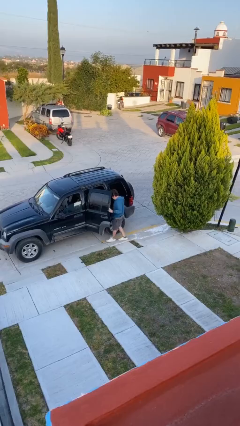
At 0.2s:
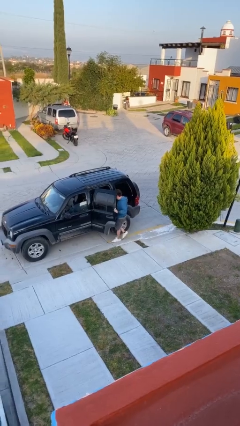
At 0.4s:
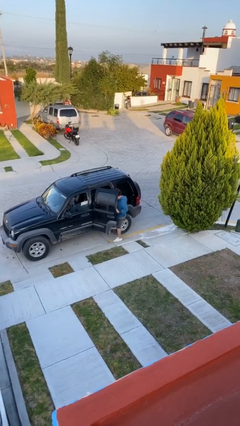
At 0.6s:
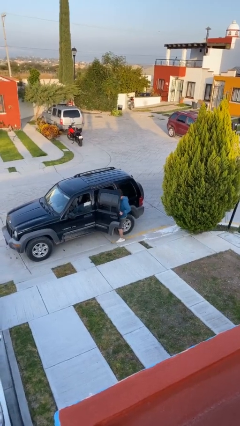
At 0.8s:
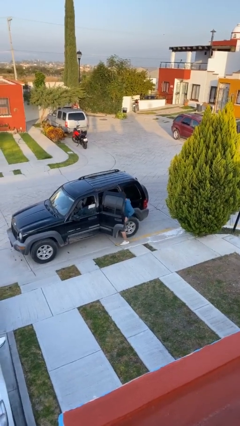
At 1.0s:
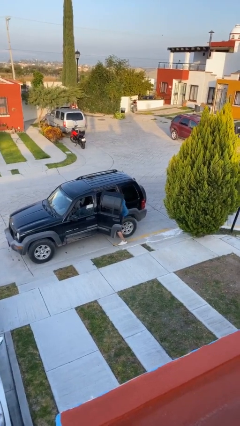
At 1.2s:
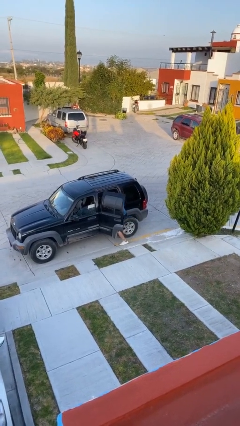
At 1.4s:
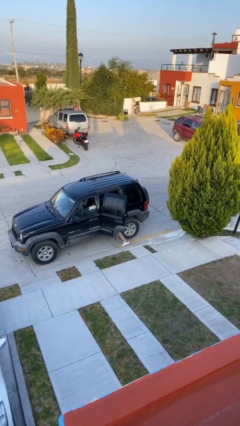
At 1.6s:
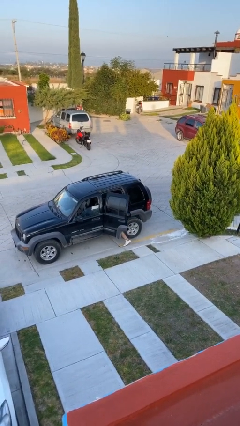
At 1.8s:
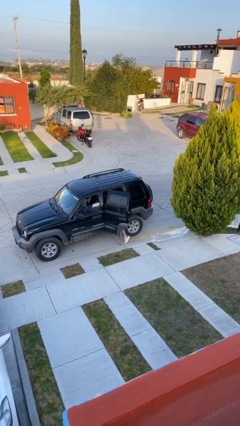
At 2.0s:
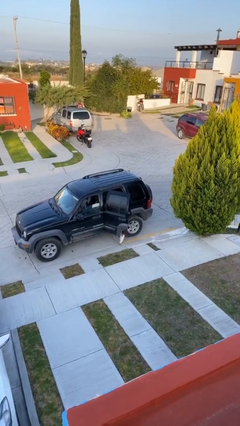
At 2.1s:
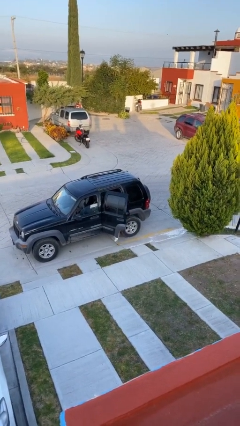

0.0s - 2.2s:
person enters car

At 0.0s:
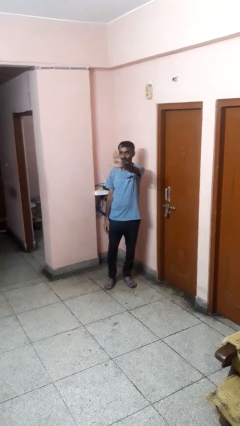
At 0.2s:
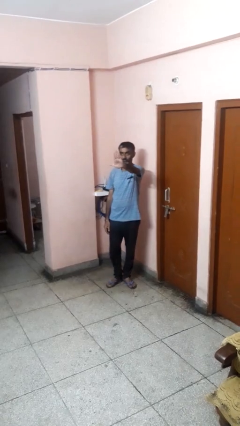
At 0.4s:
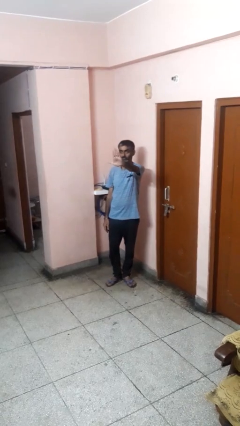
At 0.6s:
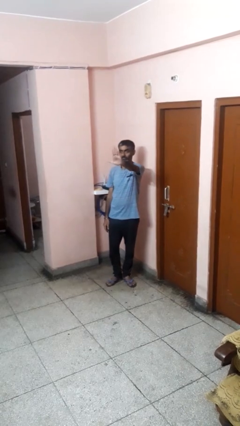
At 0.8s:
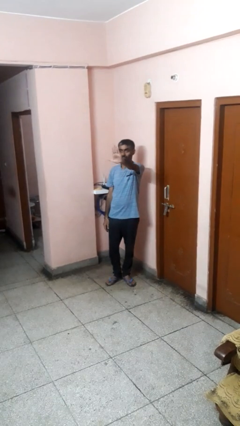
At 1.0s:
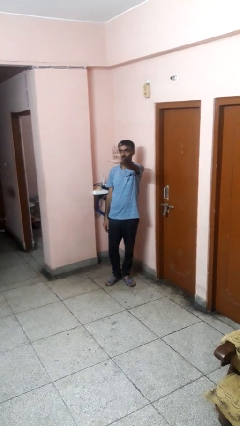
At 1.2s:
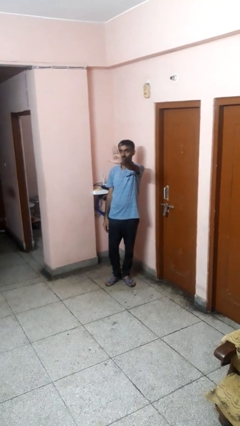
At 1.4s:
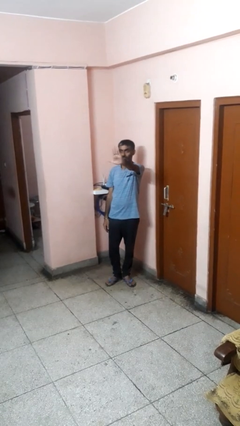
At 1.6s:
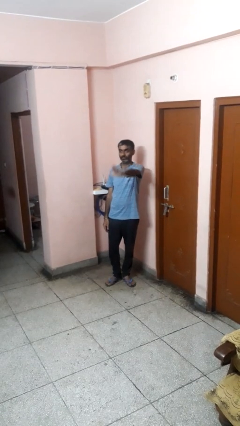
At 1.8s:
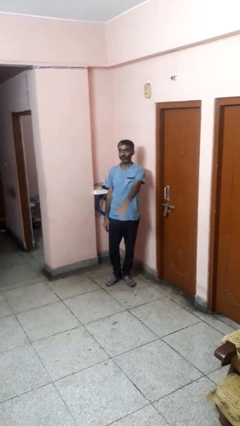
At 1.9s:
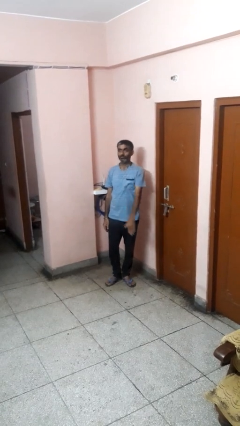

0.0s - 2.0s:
person gestures stop

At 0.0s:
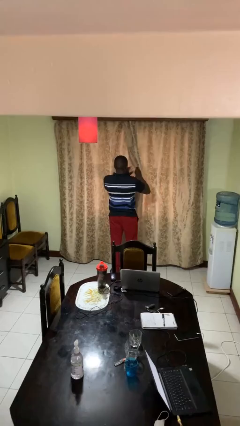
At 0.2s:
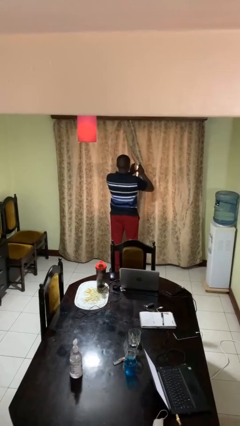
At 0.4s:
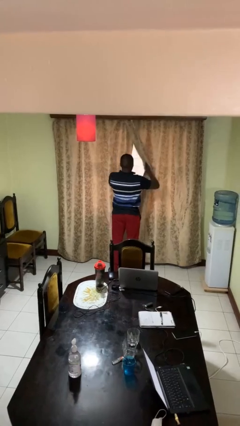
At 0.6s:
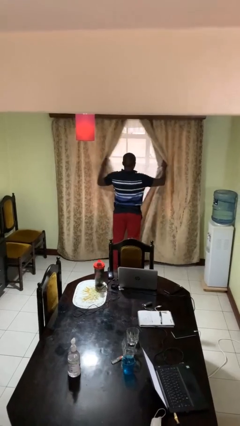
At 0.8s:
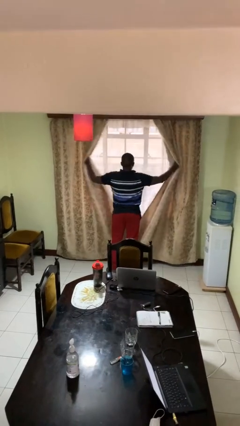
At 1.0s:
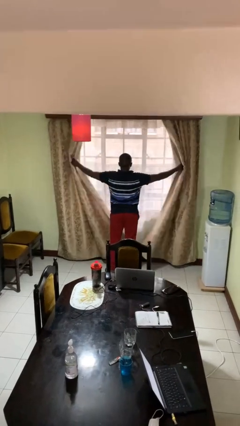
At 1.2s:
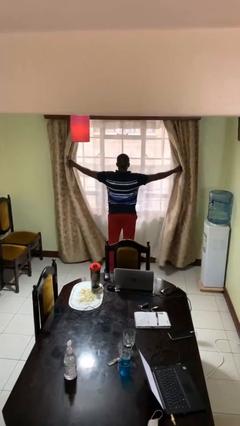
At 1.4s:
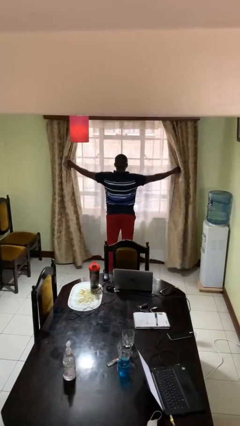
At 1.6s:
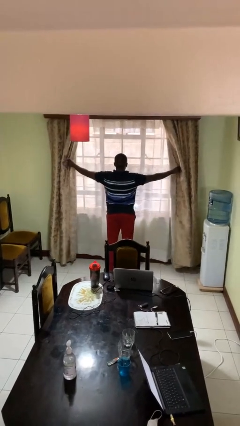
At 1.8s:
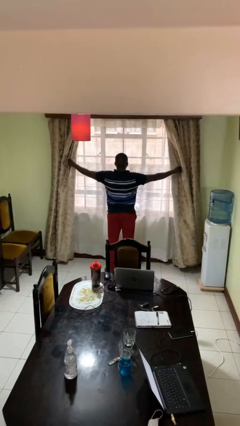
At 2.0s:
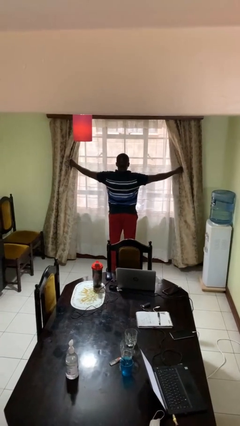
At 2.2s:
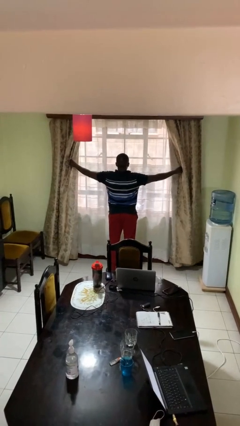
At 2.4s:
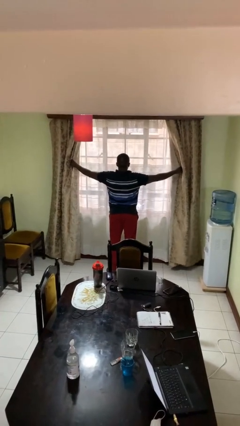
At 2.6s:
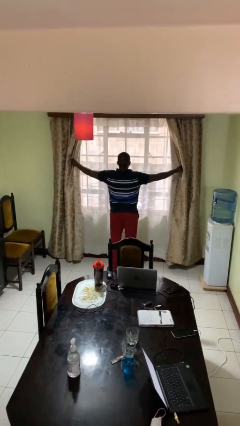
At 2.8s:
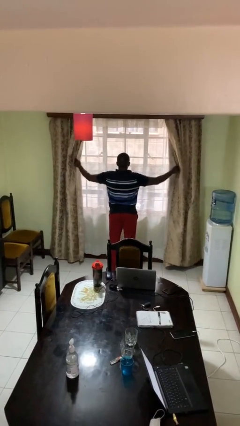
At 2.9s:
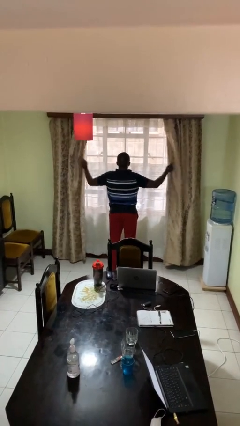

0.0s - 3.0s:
person opens curtains

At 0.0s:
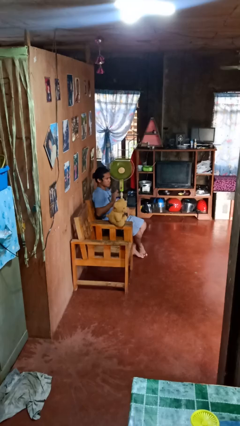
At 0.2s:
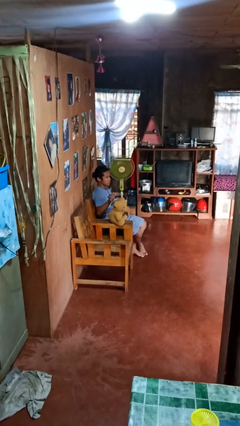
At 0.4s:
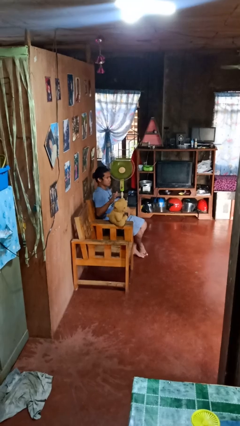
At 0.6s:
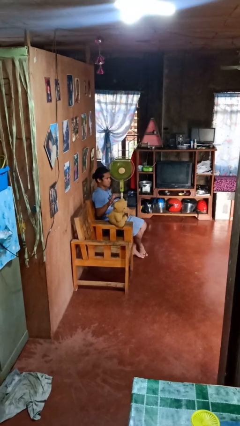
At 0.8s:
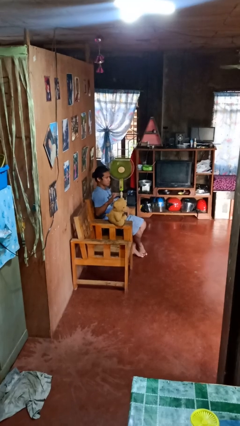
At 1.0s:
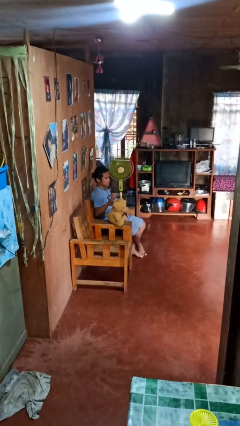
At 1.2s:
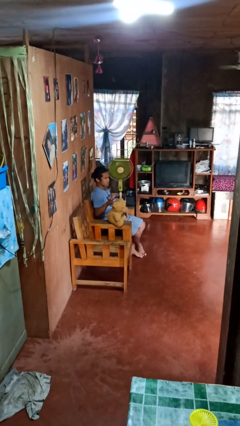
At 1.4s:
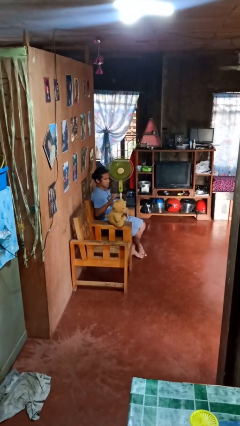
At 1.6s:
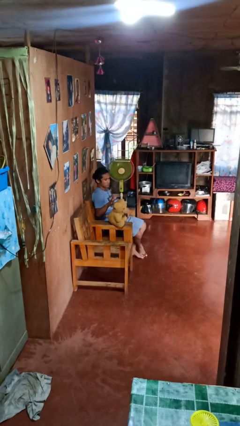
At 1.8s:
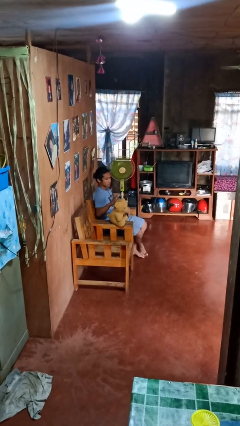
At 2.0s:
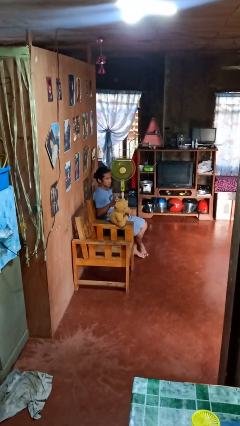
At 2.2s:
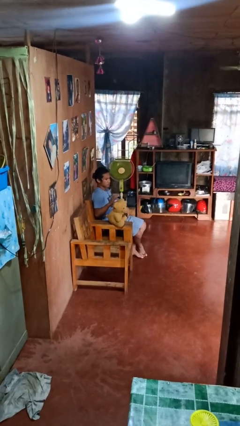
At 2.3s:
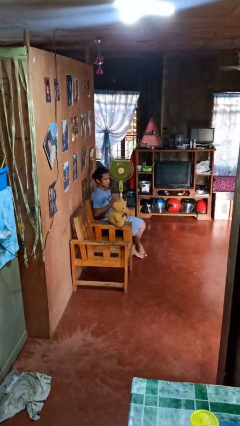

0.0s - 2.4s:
person waves hand over object

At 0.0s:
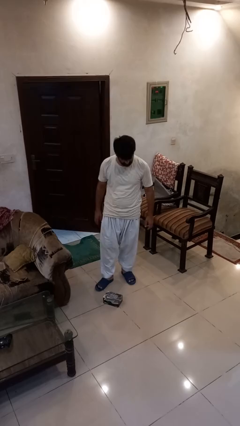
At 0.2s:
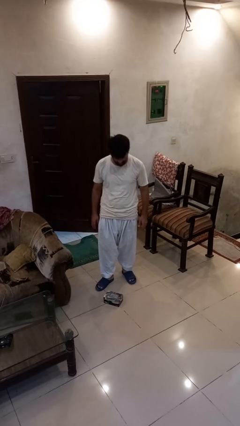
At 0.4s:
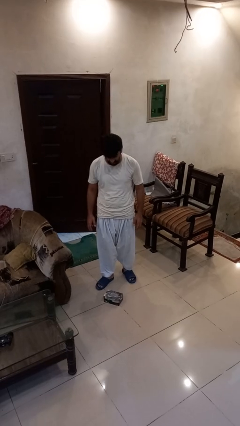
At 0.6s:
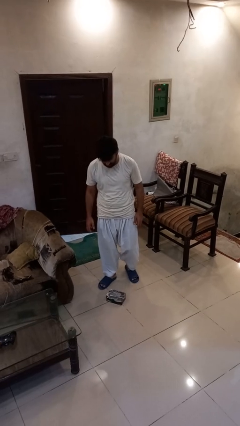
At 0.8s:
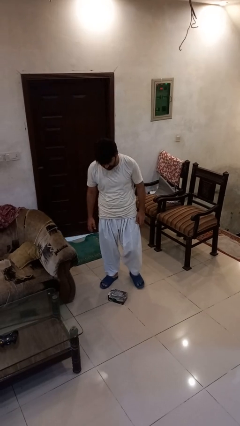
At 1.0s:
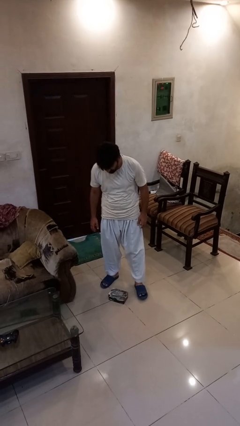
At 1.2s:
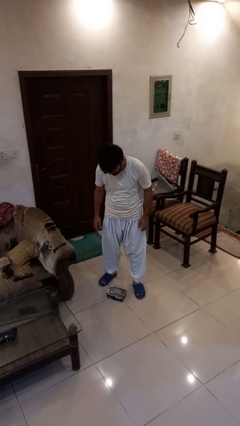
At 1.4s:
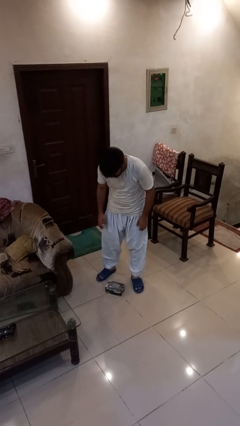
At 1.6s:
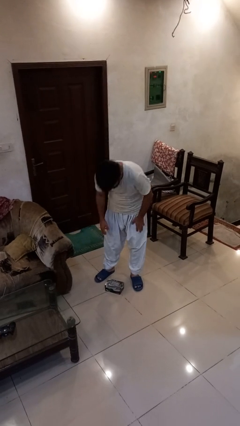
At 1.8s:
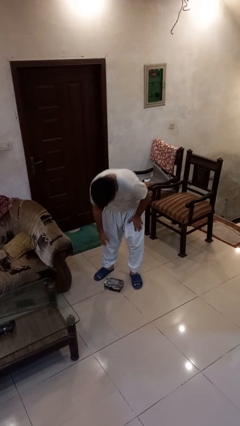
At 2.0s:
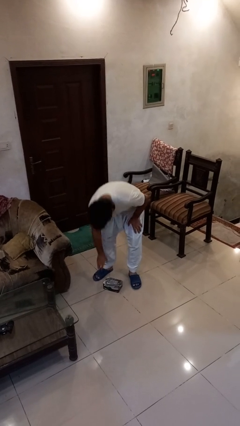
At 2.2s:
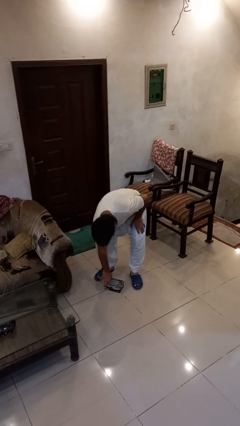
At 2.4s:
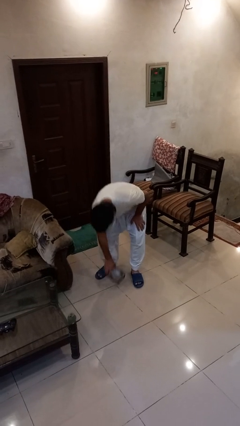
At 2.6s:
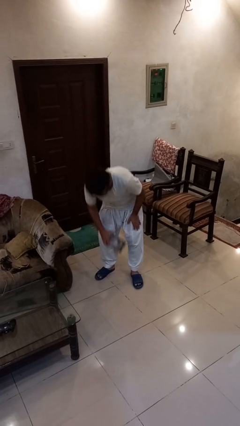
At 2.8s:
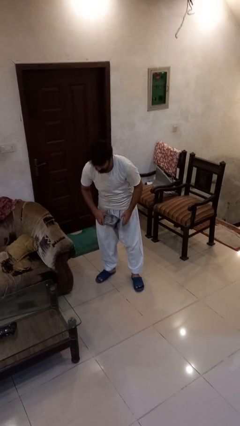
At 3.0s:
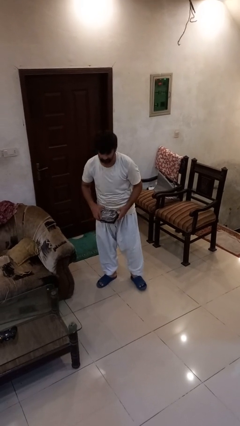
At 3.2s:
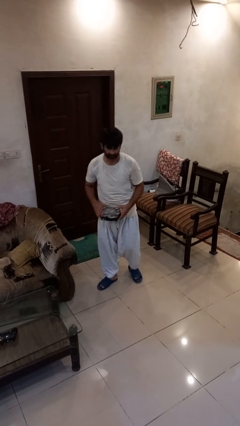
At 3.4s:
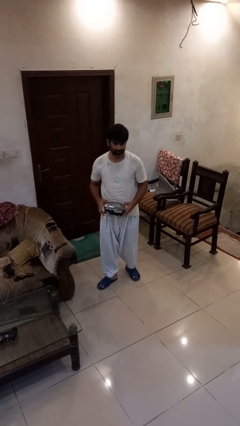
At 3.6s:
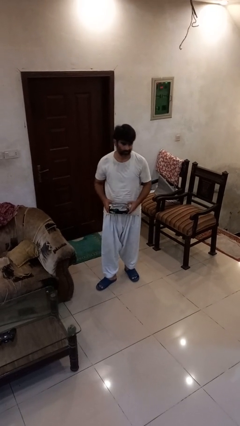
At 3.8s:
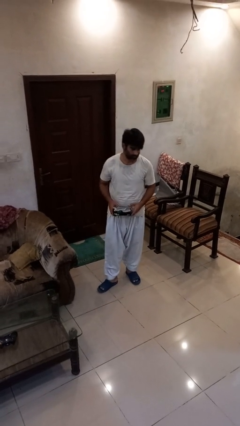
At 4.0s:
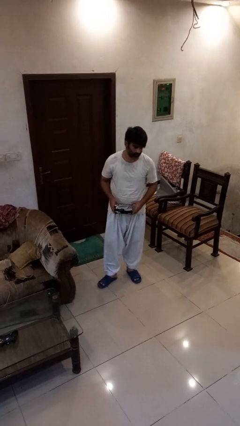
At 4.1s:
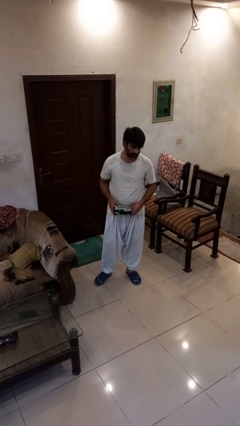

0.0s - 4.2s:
person picks up object from floor

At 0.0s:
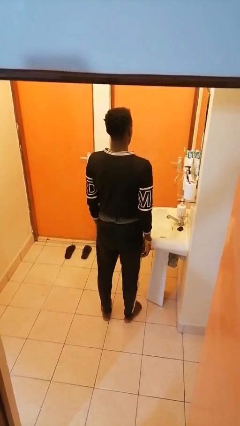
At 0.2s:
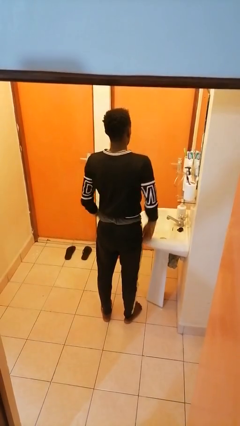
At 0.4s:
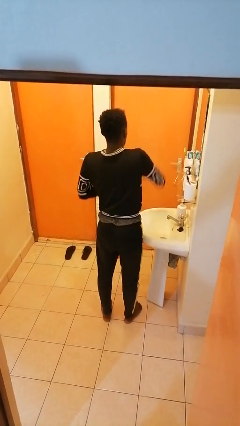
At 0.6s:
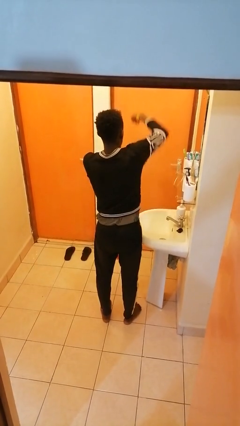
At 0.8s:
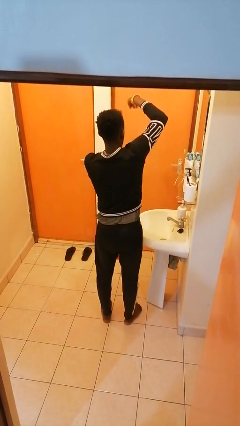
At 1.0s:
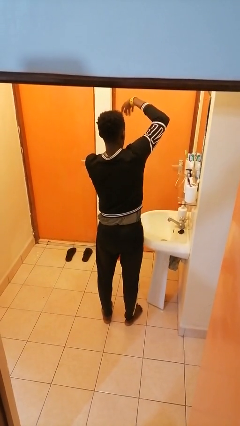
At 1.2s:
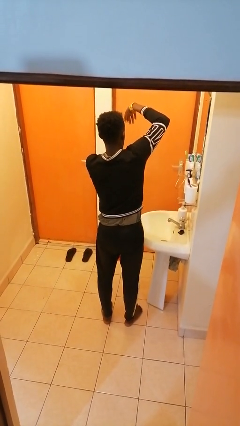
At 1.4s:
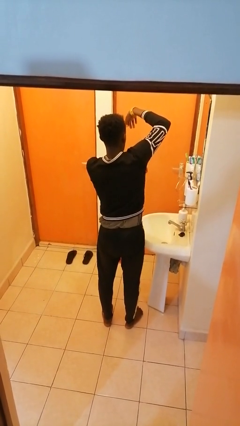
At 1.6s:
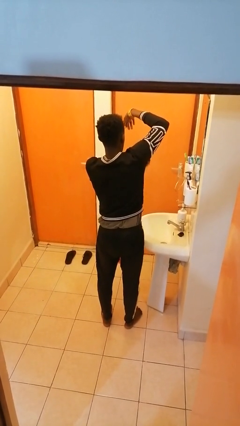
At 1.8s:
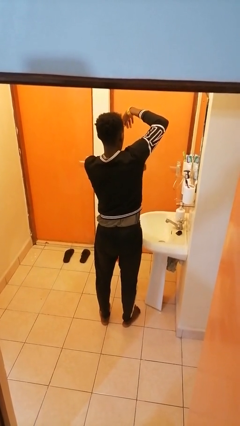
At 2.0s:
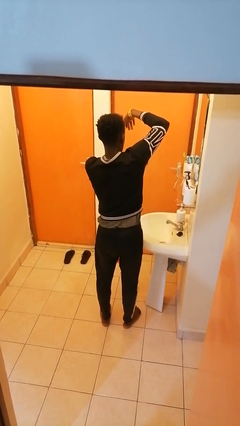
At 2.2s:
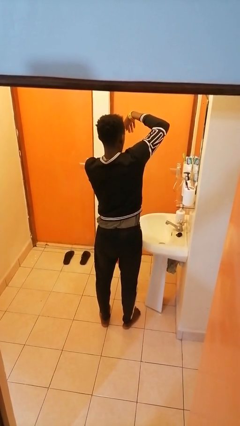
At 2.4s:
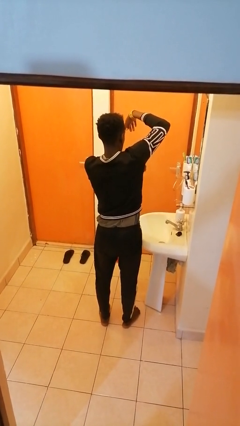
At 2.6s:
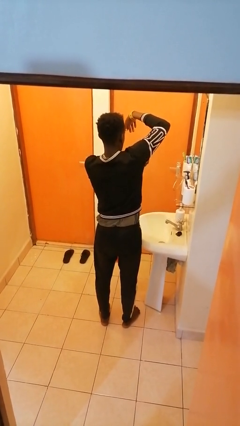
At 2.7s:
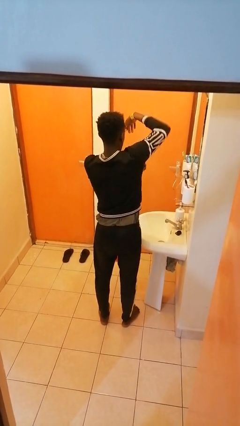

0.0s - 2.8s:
person applies deodorant

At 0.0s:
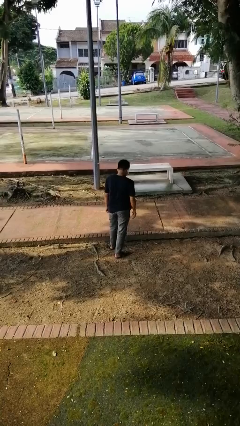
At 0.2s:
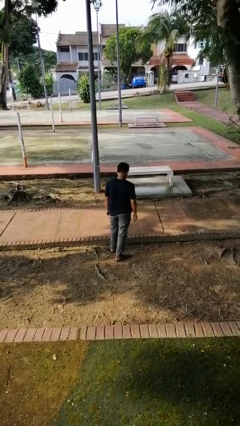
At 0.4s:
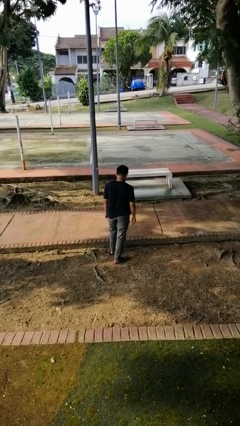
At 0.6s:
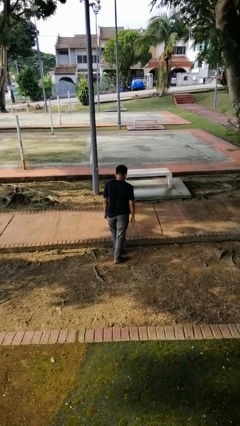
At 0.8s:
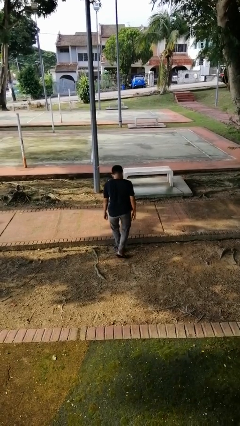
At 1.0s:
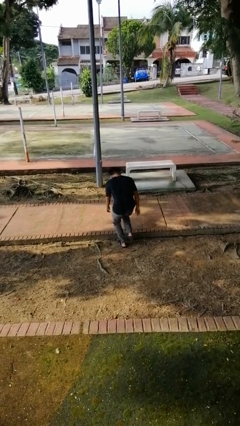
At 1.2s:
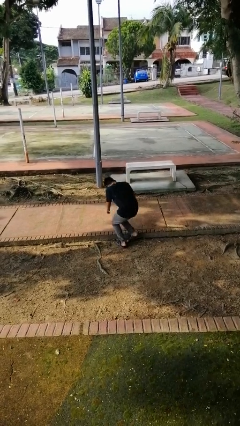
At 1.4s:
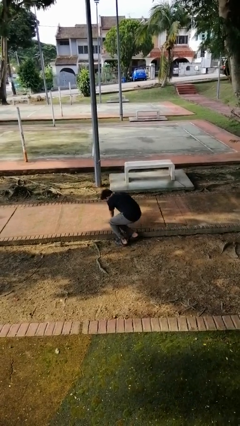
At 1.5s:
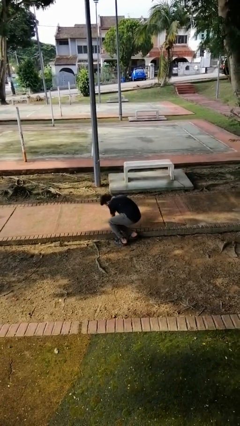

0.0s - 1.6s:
person trips on object on floor
